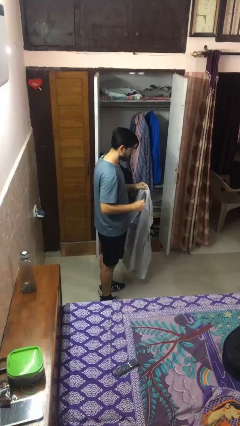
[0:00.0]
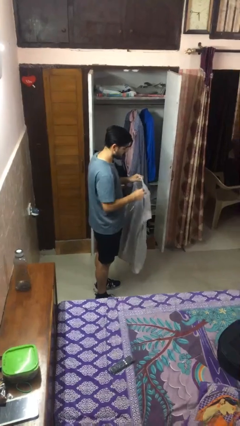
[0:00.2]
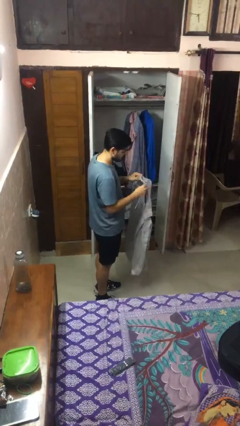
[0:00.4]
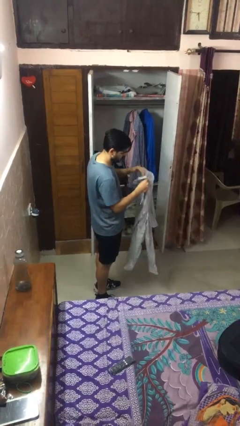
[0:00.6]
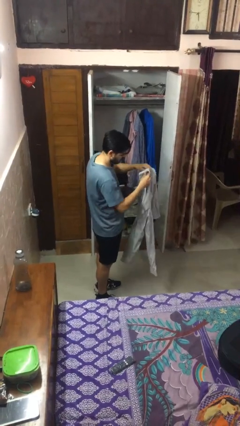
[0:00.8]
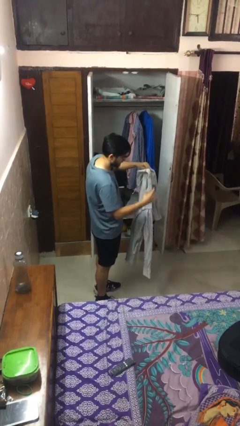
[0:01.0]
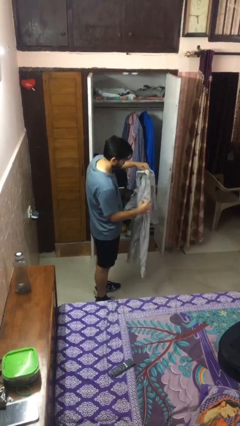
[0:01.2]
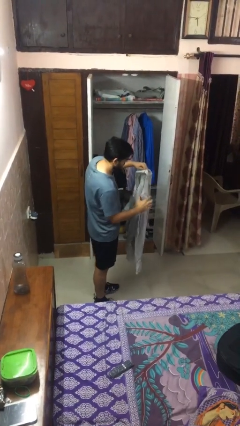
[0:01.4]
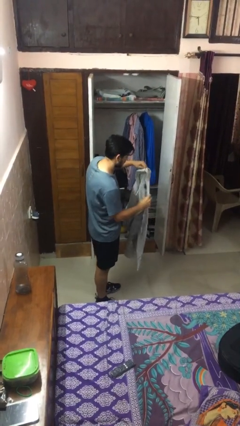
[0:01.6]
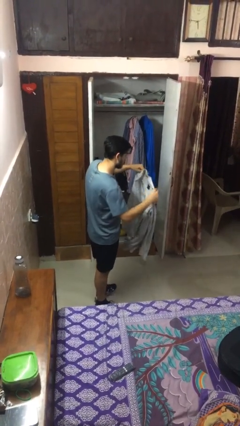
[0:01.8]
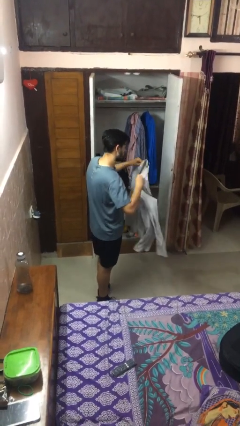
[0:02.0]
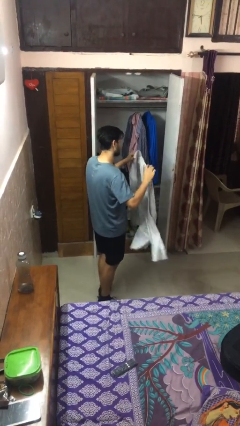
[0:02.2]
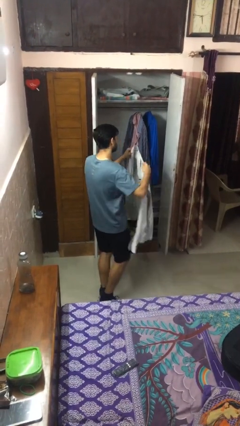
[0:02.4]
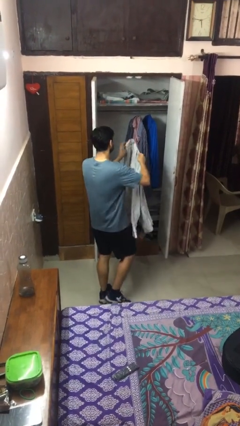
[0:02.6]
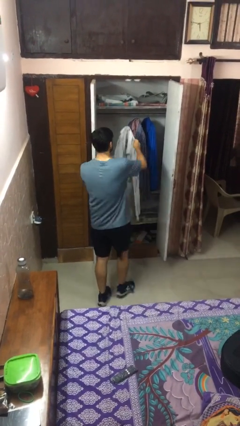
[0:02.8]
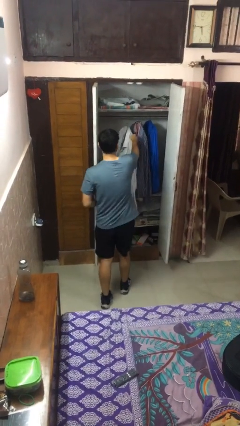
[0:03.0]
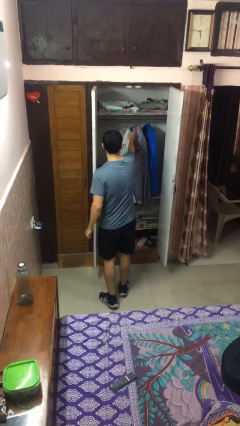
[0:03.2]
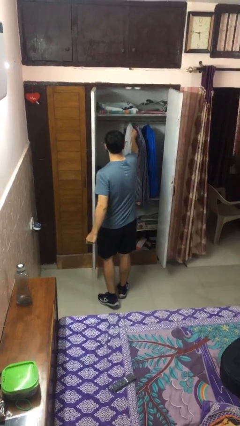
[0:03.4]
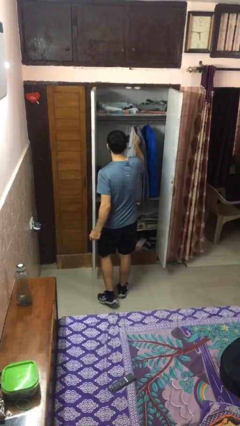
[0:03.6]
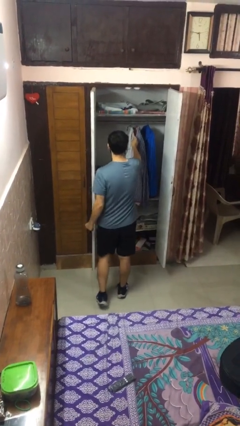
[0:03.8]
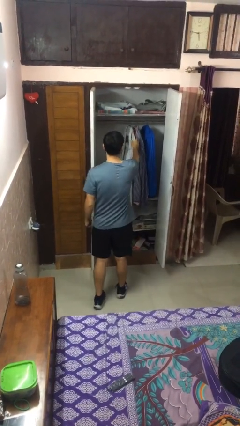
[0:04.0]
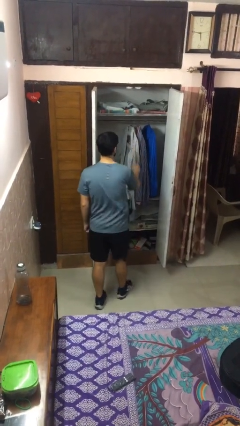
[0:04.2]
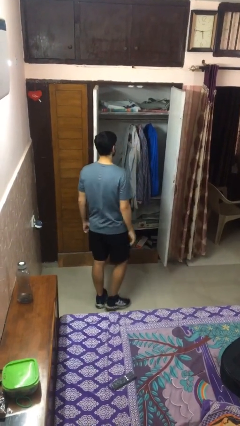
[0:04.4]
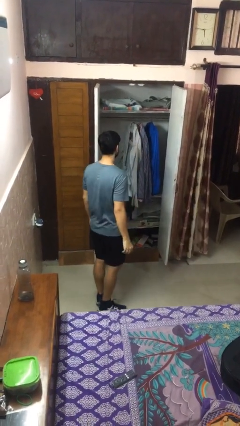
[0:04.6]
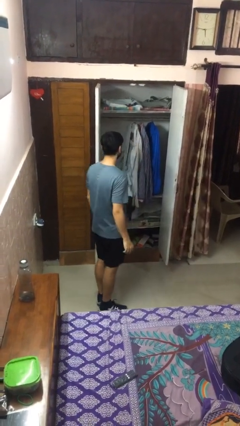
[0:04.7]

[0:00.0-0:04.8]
person puts clothes into closet

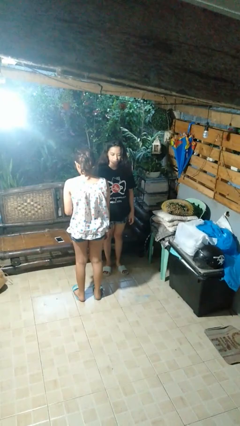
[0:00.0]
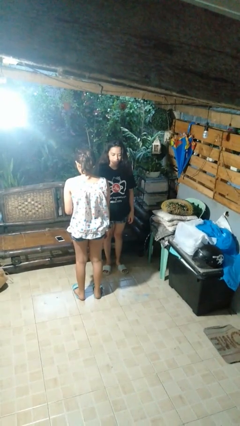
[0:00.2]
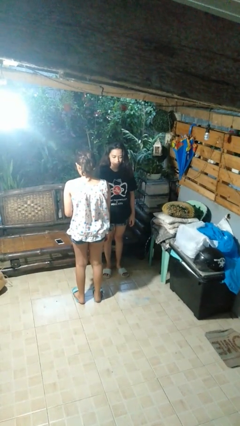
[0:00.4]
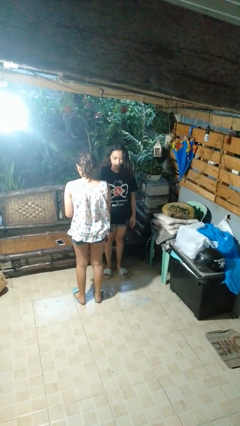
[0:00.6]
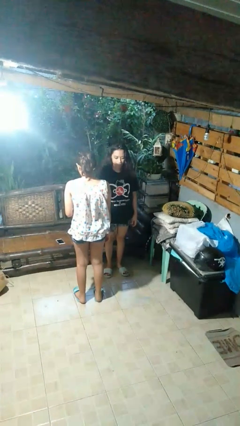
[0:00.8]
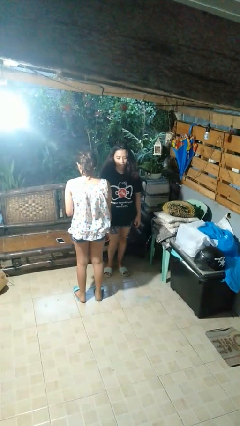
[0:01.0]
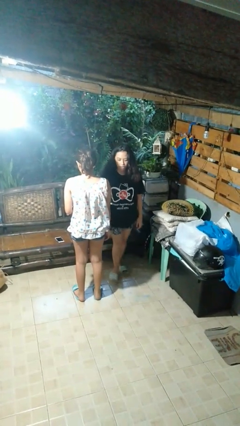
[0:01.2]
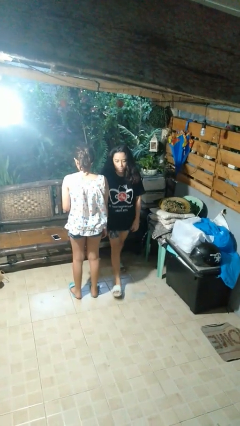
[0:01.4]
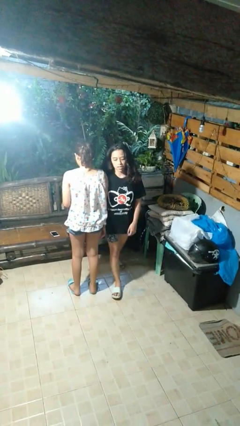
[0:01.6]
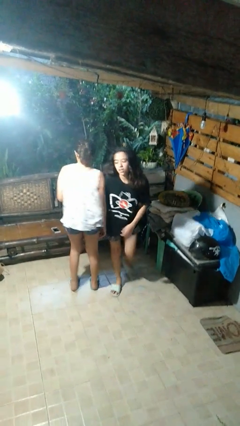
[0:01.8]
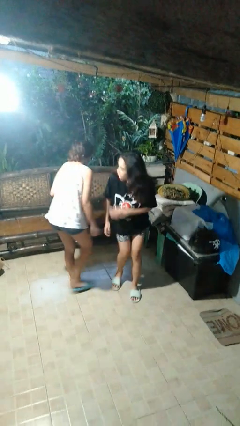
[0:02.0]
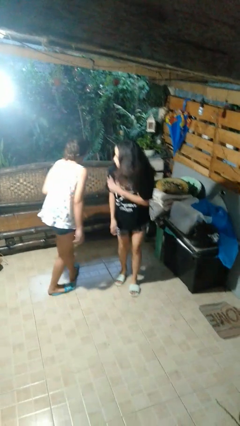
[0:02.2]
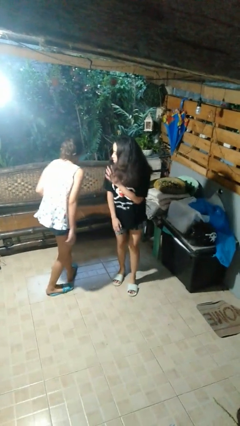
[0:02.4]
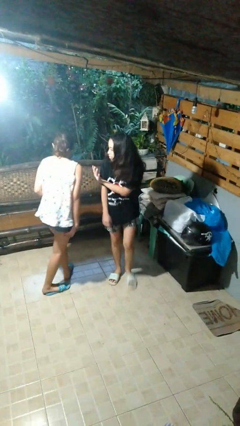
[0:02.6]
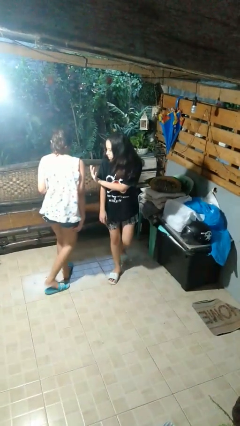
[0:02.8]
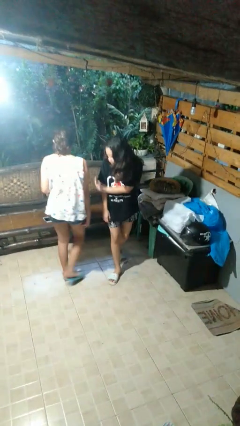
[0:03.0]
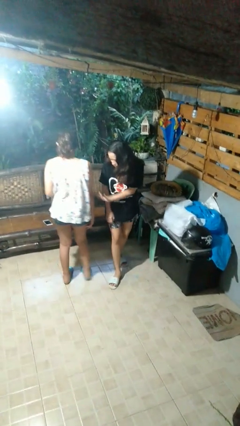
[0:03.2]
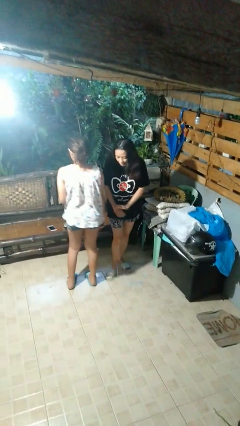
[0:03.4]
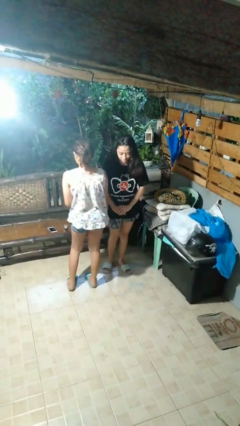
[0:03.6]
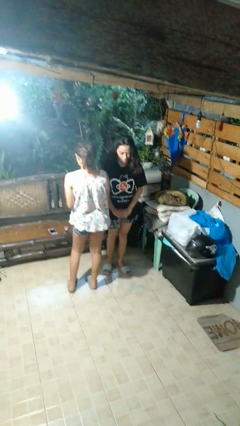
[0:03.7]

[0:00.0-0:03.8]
person bumps into person

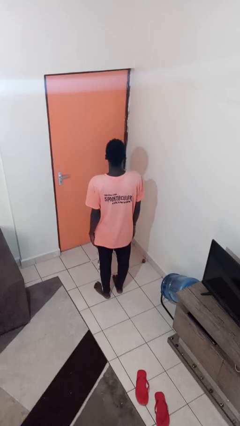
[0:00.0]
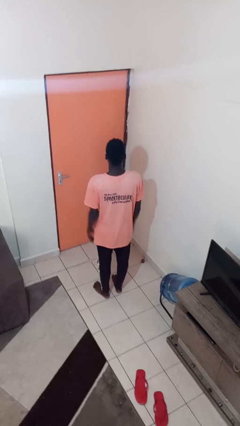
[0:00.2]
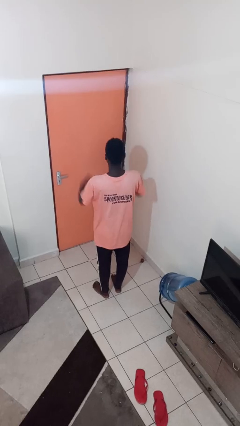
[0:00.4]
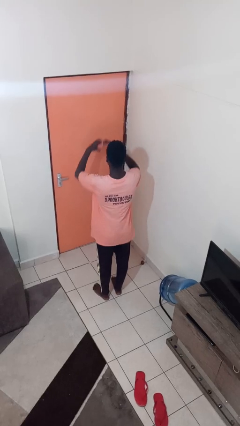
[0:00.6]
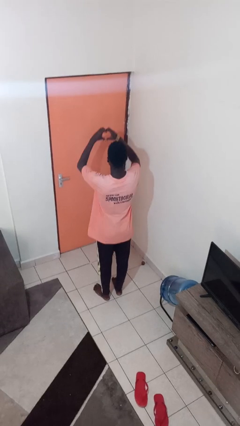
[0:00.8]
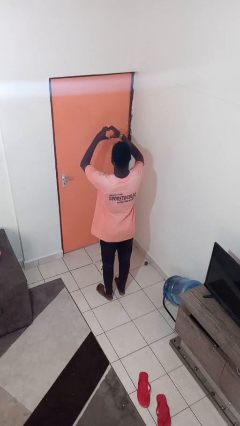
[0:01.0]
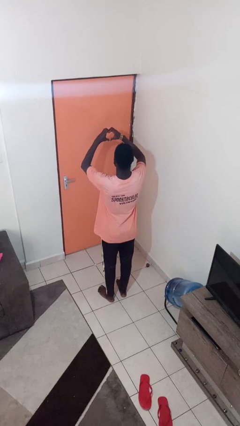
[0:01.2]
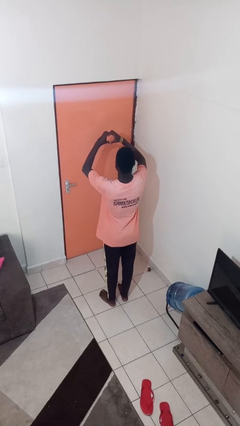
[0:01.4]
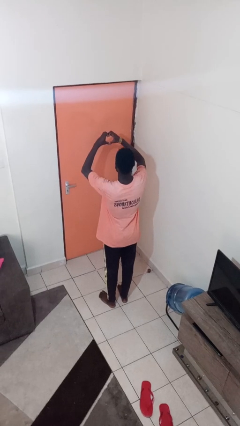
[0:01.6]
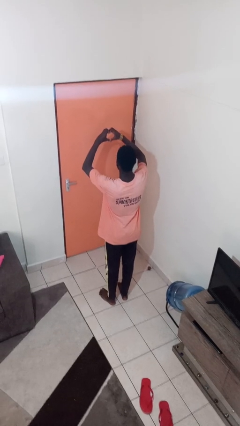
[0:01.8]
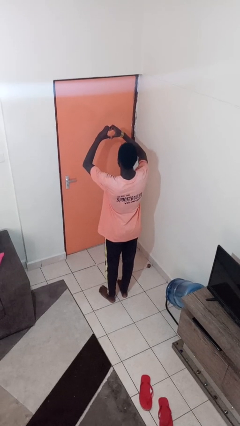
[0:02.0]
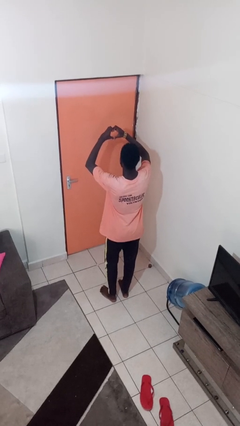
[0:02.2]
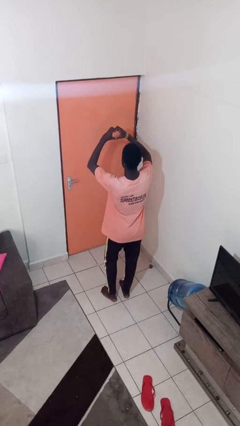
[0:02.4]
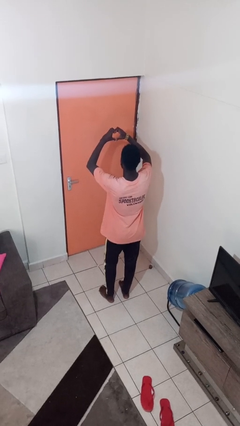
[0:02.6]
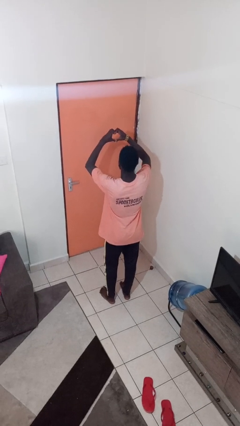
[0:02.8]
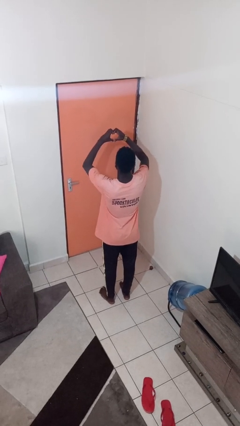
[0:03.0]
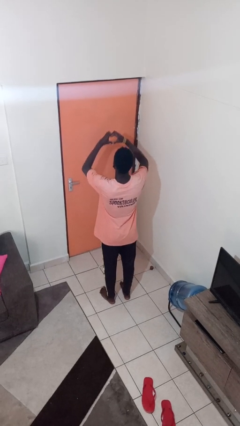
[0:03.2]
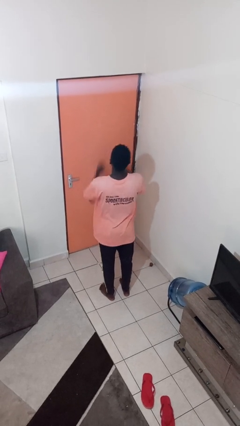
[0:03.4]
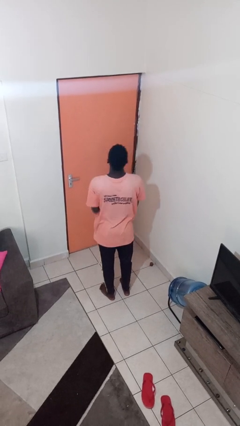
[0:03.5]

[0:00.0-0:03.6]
person gestures heart

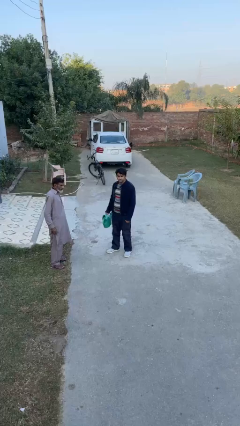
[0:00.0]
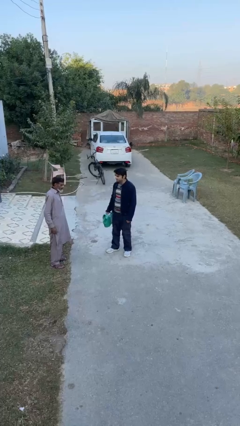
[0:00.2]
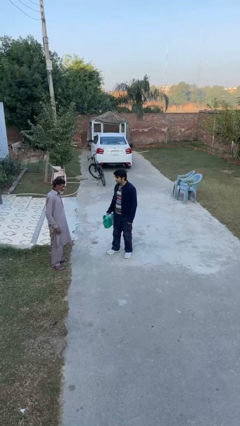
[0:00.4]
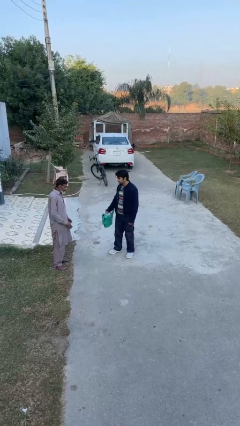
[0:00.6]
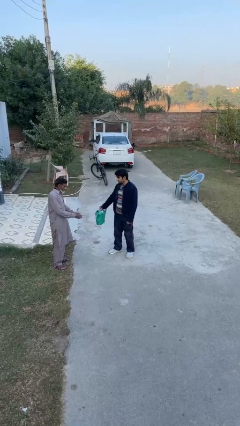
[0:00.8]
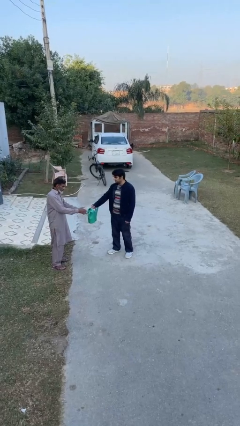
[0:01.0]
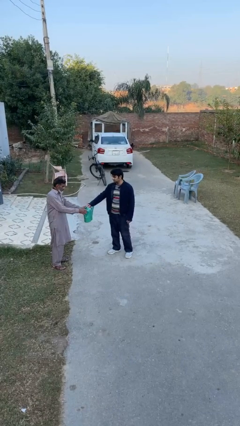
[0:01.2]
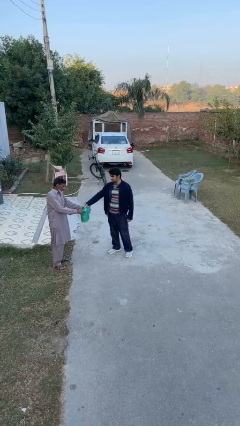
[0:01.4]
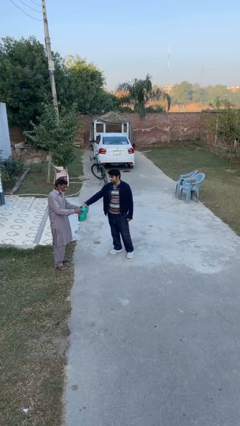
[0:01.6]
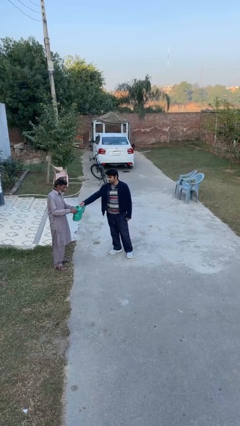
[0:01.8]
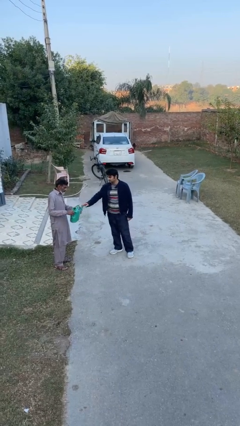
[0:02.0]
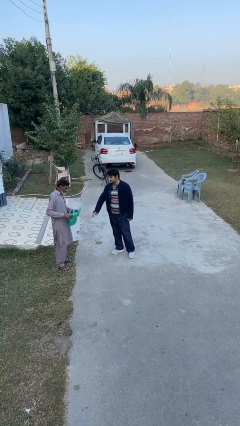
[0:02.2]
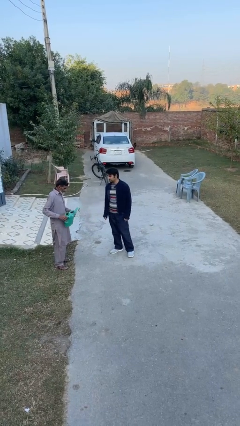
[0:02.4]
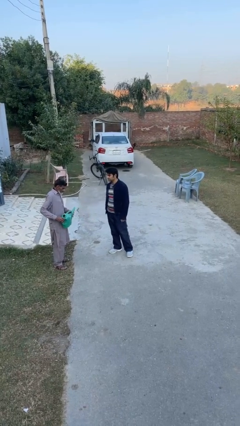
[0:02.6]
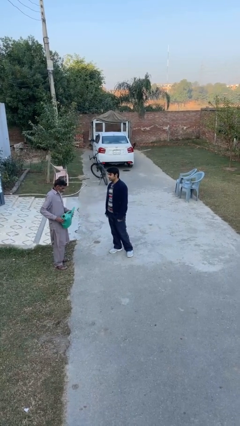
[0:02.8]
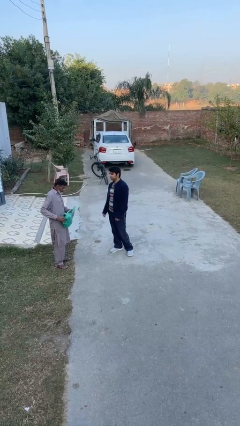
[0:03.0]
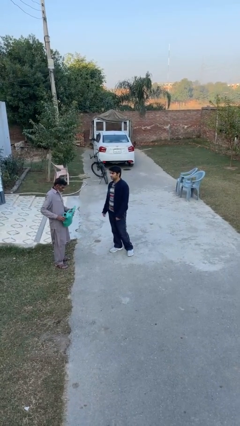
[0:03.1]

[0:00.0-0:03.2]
person transfers object to person

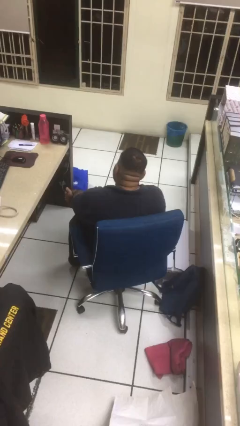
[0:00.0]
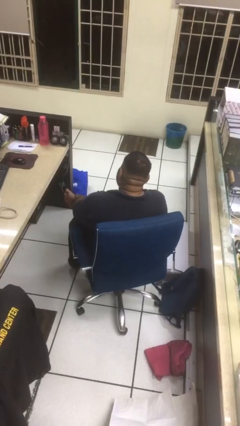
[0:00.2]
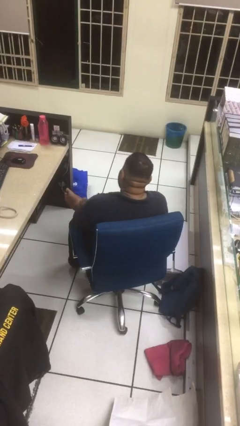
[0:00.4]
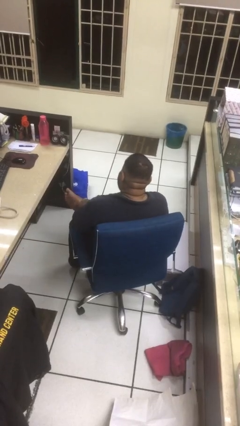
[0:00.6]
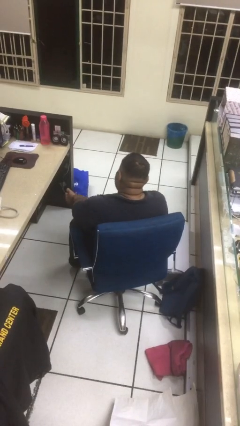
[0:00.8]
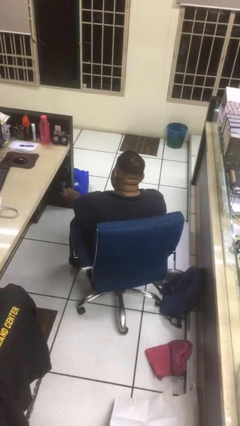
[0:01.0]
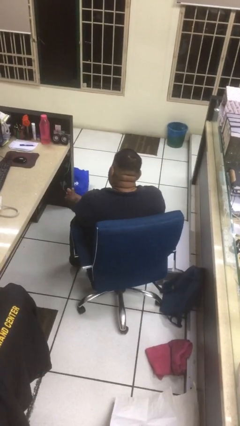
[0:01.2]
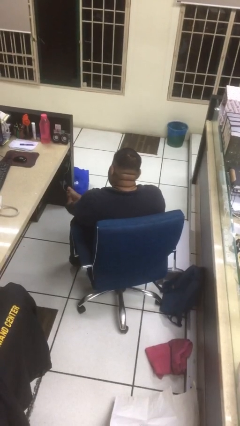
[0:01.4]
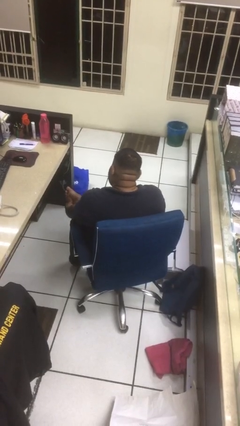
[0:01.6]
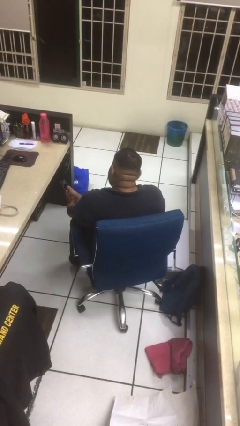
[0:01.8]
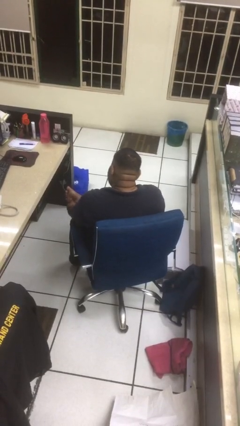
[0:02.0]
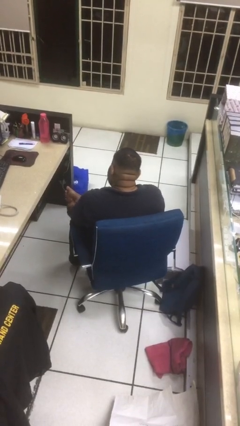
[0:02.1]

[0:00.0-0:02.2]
person rubs foot
